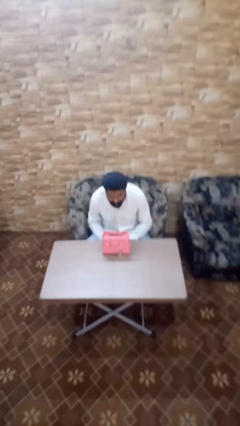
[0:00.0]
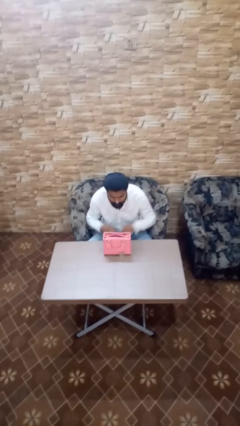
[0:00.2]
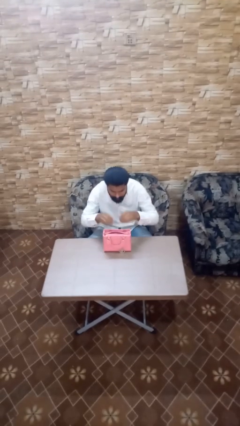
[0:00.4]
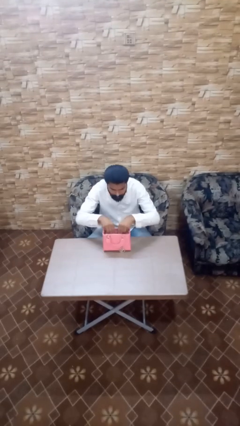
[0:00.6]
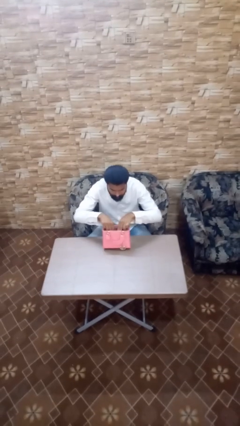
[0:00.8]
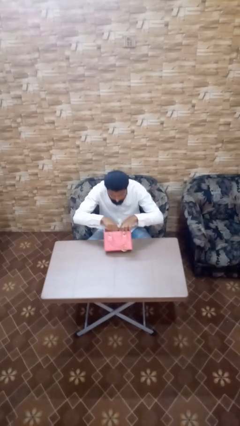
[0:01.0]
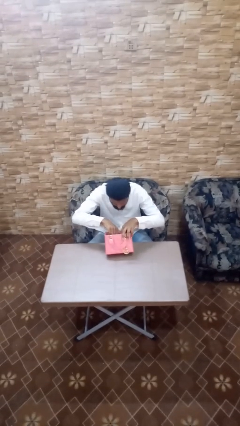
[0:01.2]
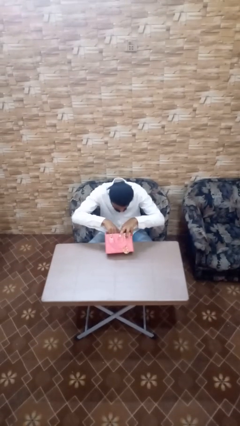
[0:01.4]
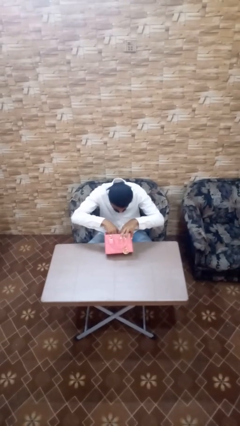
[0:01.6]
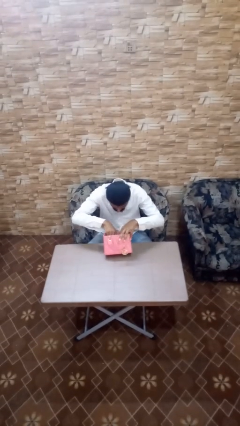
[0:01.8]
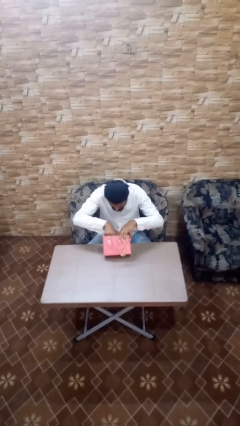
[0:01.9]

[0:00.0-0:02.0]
person searches in purse

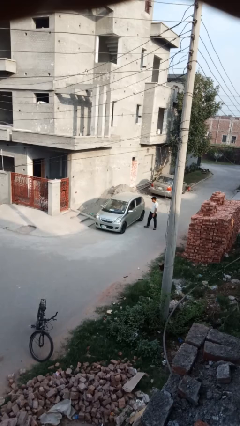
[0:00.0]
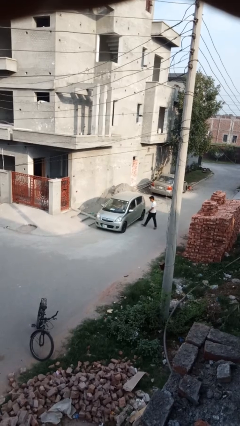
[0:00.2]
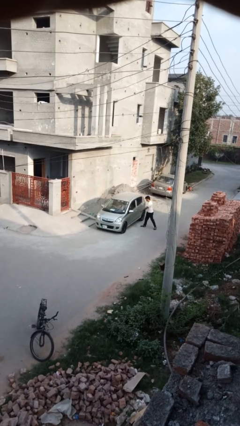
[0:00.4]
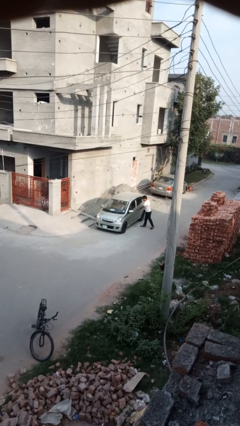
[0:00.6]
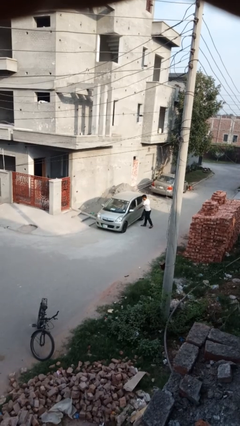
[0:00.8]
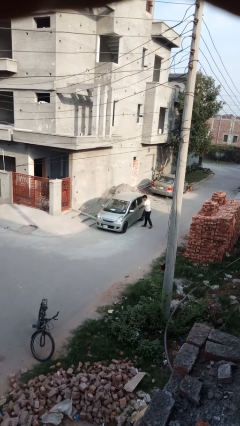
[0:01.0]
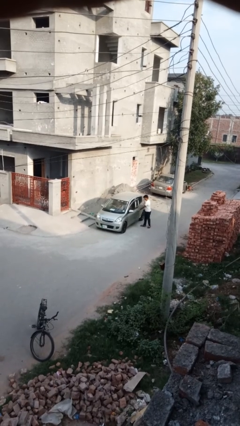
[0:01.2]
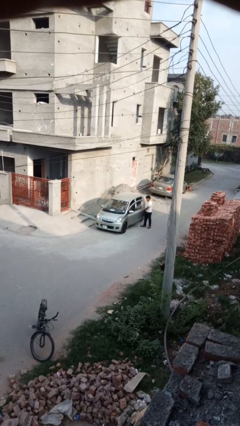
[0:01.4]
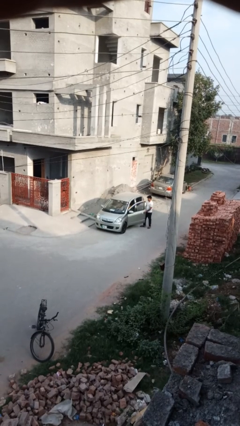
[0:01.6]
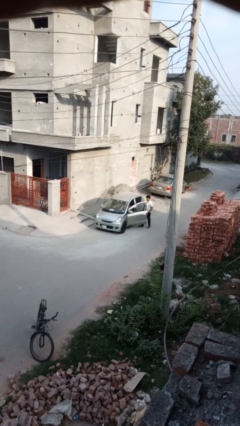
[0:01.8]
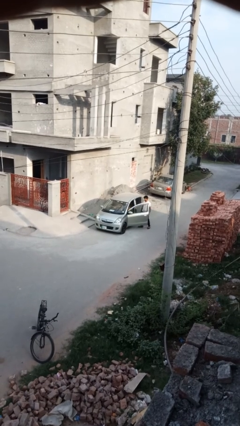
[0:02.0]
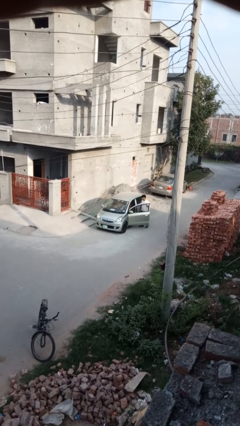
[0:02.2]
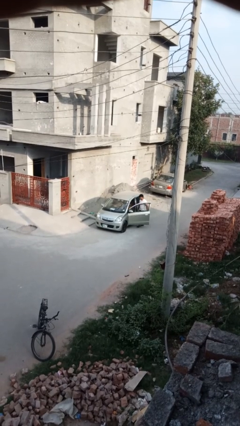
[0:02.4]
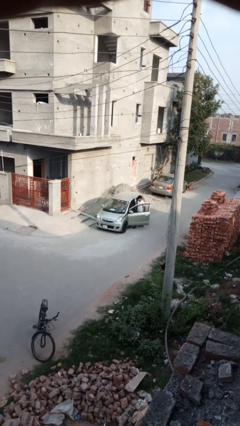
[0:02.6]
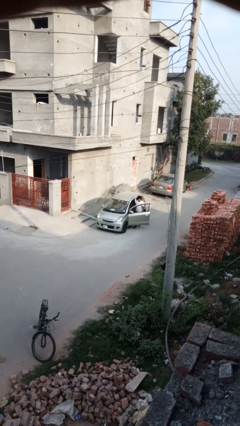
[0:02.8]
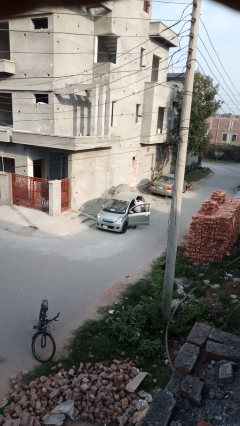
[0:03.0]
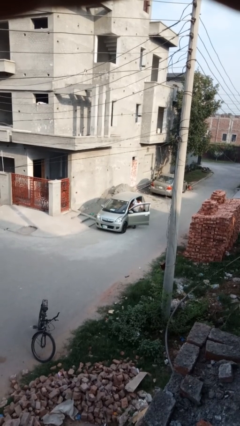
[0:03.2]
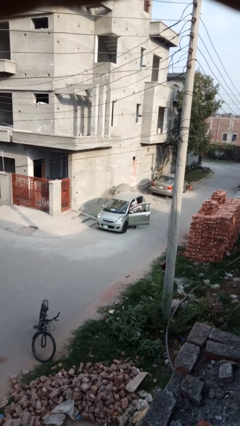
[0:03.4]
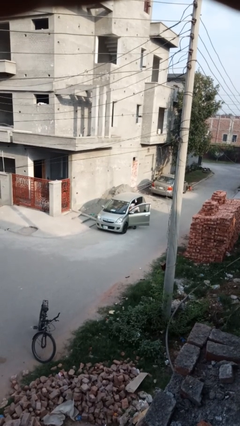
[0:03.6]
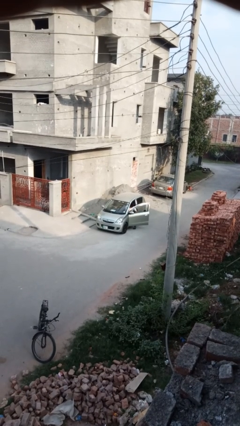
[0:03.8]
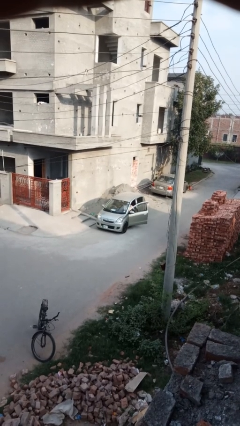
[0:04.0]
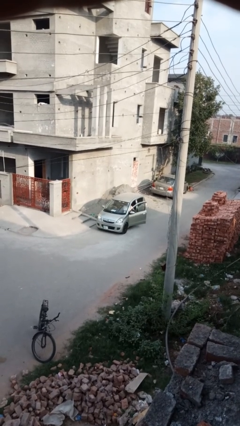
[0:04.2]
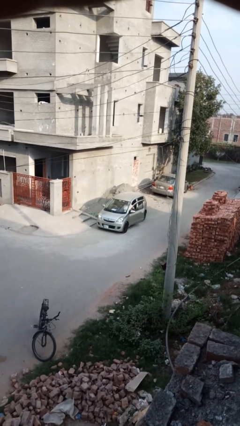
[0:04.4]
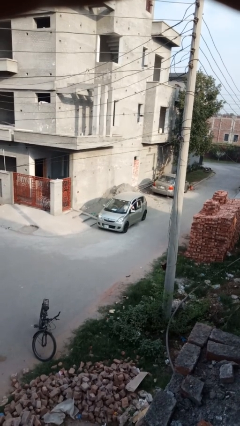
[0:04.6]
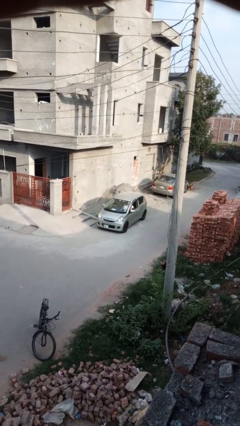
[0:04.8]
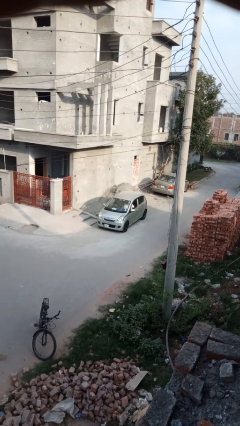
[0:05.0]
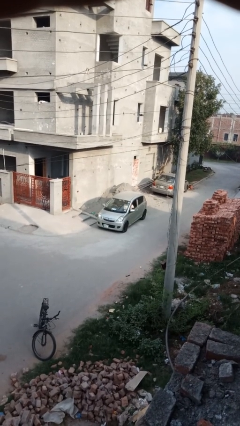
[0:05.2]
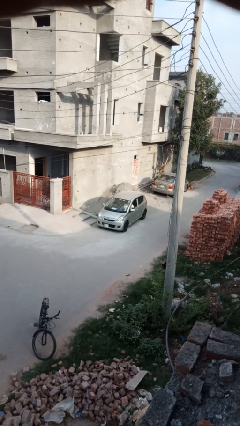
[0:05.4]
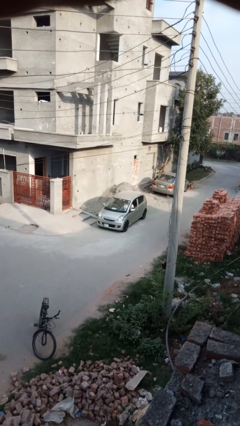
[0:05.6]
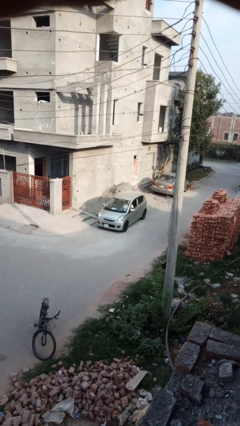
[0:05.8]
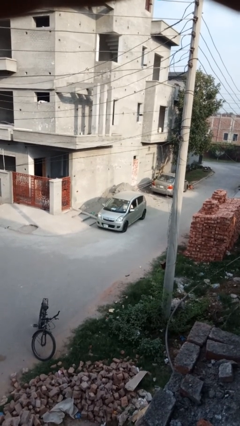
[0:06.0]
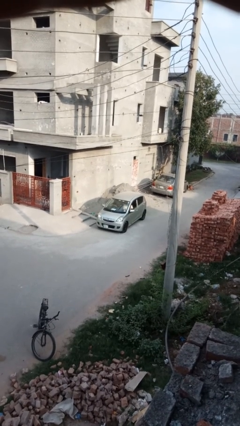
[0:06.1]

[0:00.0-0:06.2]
car picks up person

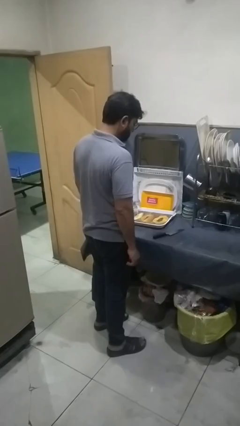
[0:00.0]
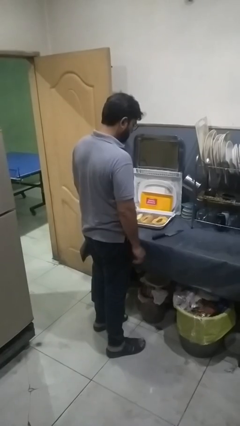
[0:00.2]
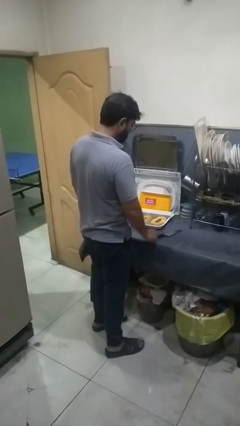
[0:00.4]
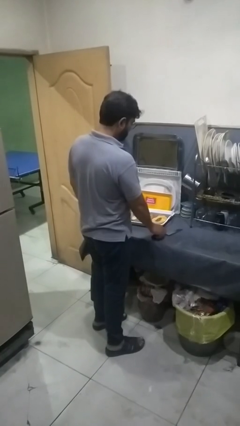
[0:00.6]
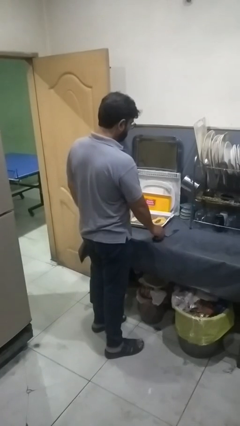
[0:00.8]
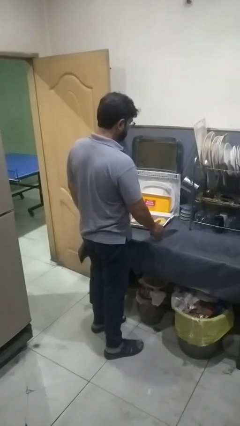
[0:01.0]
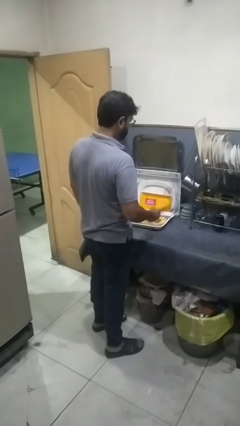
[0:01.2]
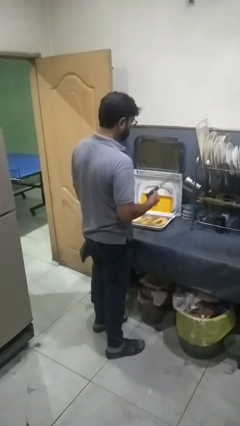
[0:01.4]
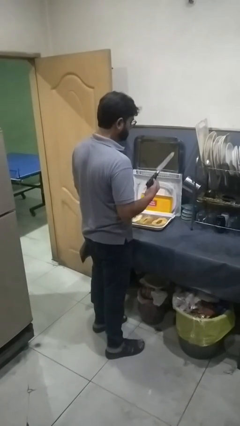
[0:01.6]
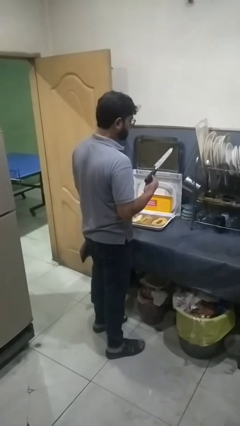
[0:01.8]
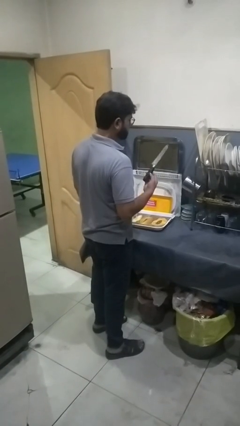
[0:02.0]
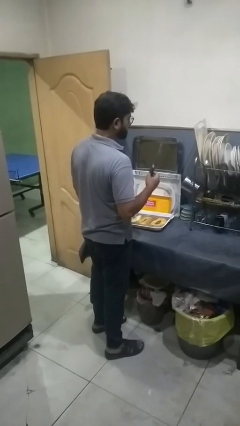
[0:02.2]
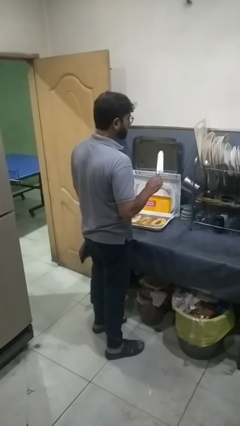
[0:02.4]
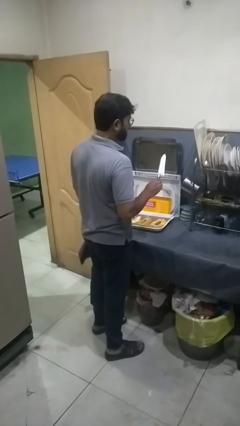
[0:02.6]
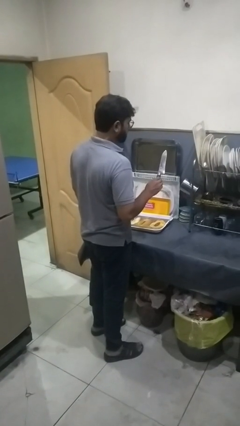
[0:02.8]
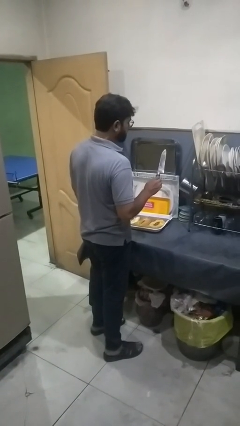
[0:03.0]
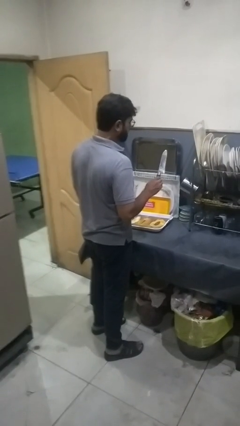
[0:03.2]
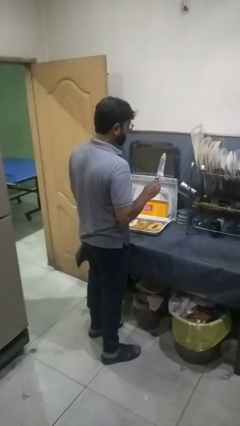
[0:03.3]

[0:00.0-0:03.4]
person picks up object from countertop

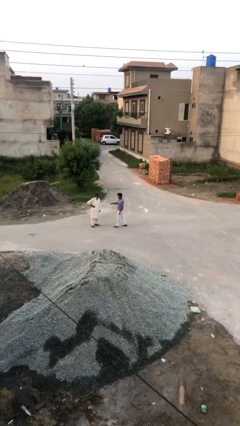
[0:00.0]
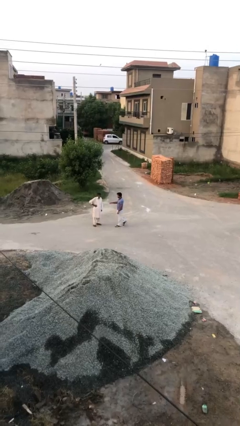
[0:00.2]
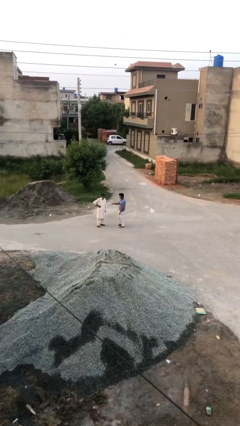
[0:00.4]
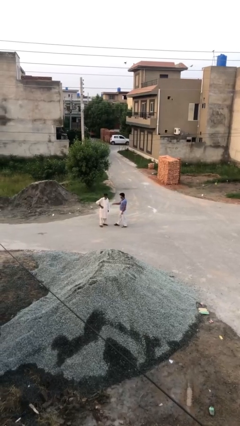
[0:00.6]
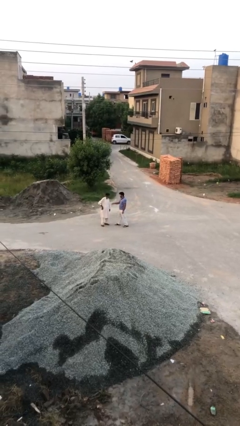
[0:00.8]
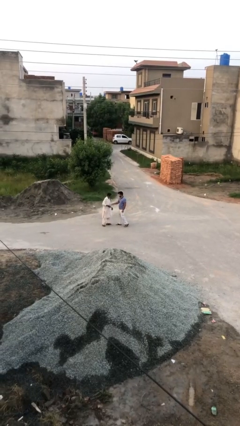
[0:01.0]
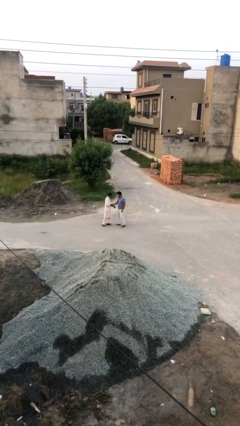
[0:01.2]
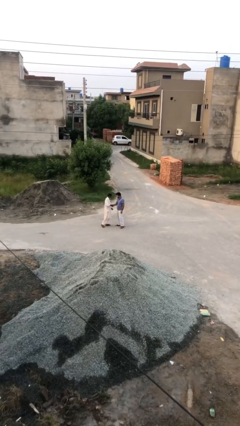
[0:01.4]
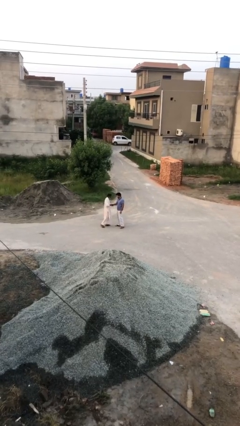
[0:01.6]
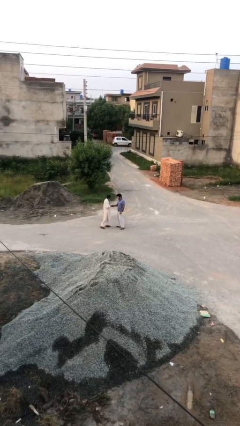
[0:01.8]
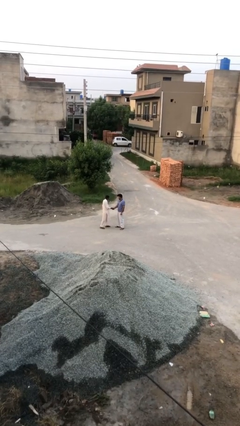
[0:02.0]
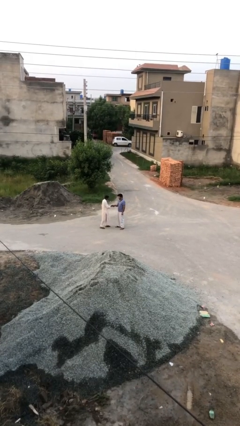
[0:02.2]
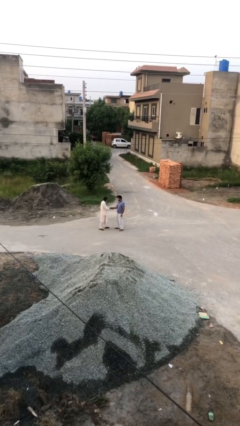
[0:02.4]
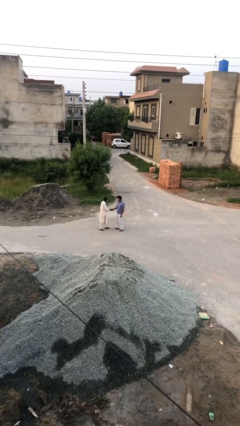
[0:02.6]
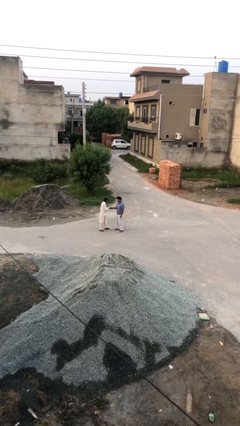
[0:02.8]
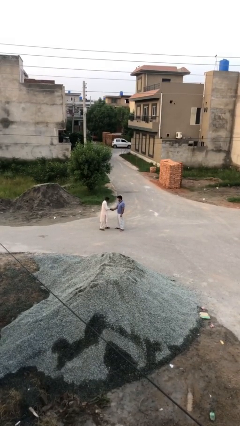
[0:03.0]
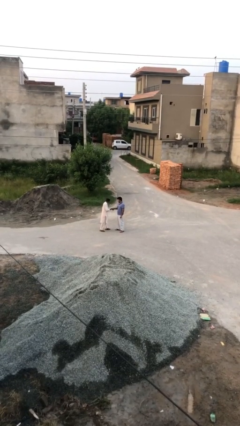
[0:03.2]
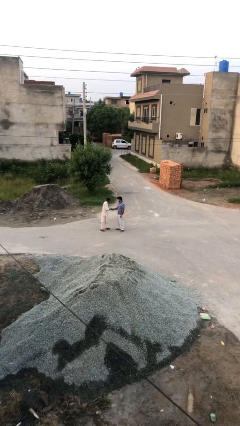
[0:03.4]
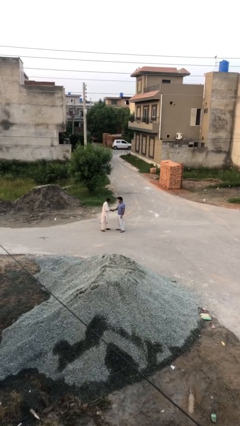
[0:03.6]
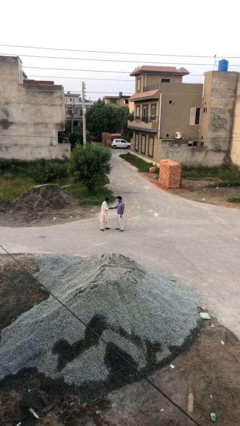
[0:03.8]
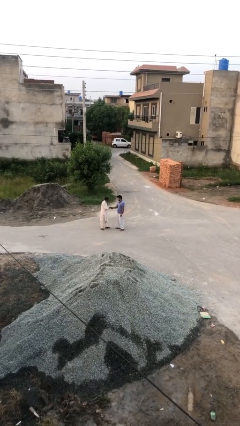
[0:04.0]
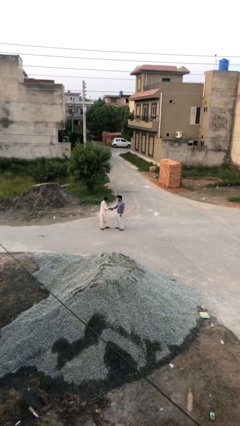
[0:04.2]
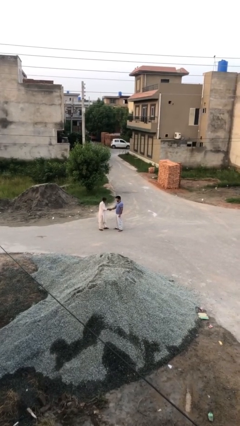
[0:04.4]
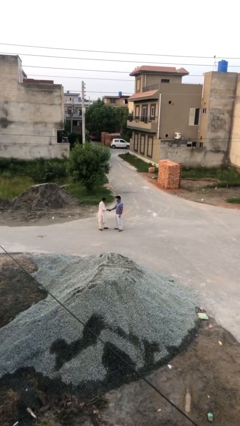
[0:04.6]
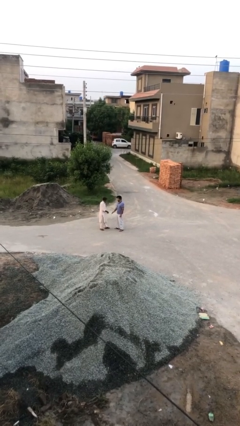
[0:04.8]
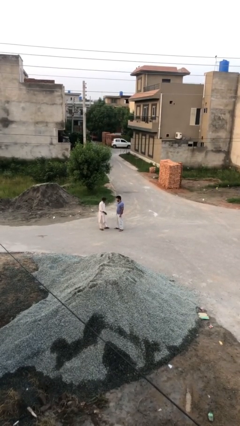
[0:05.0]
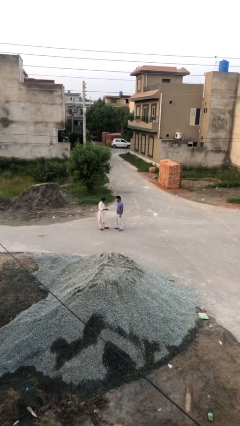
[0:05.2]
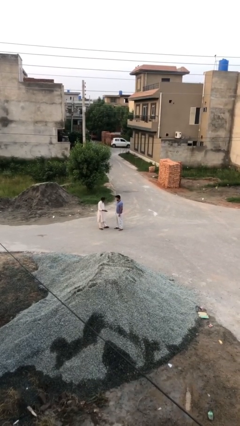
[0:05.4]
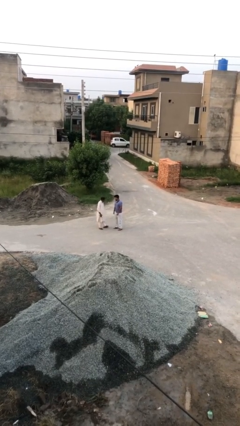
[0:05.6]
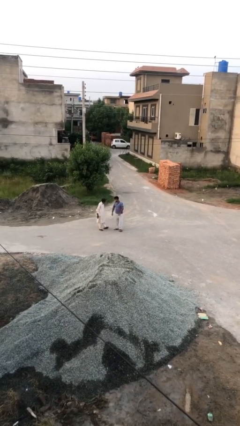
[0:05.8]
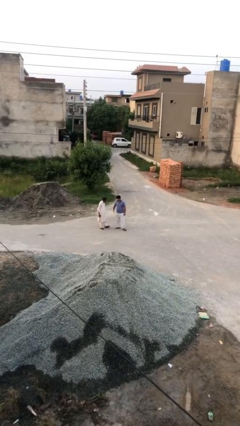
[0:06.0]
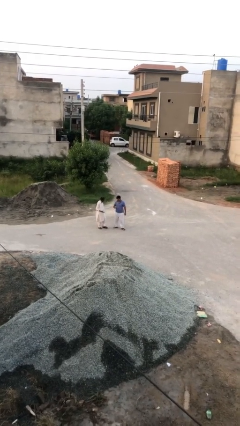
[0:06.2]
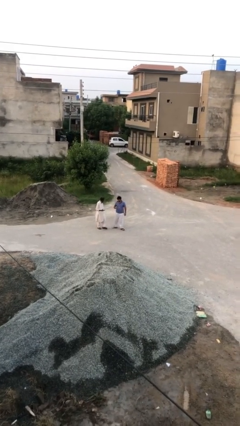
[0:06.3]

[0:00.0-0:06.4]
person shakes hand
